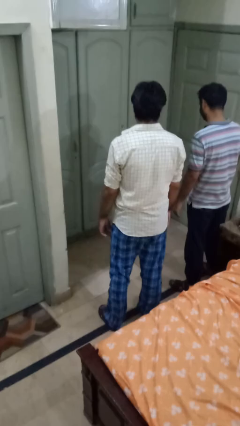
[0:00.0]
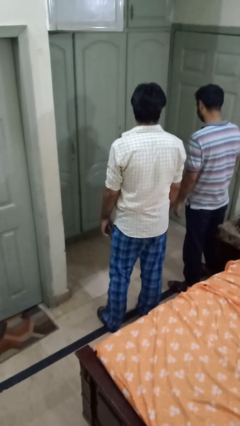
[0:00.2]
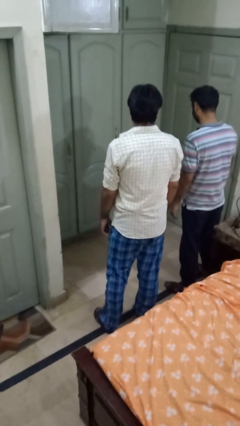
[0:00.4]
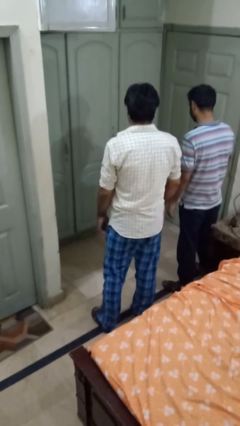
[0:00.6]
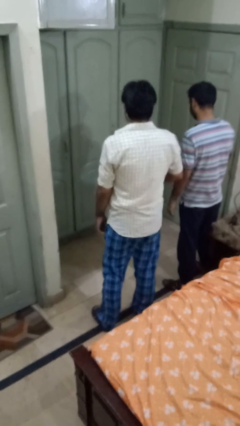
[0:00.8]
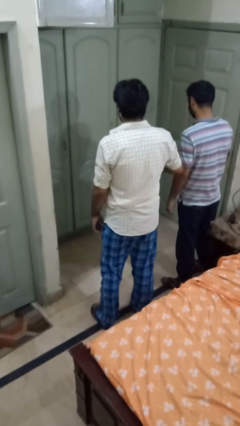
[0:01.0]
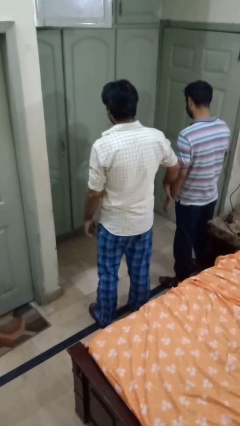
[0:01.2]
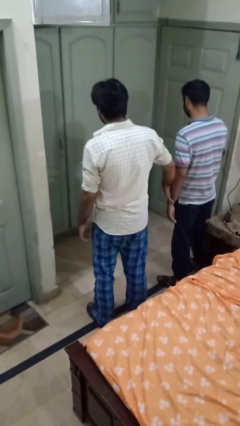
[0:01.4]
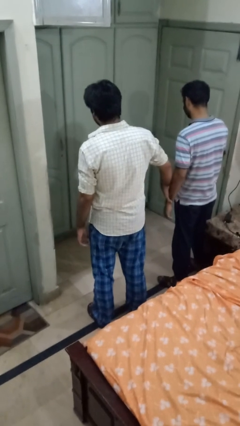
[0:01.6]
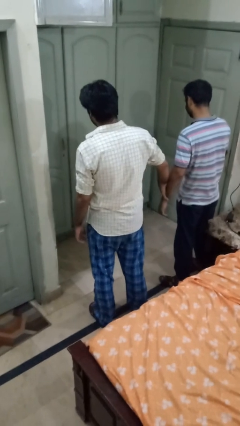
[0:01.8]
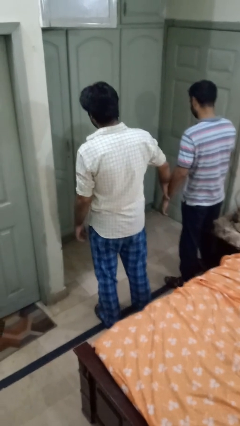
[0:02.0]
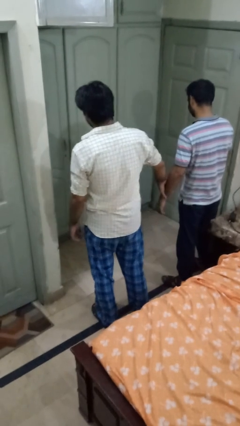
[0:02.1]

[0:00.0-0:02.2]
person grabs person by forearm

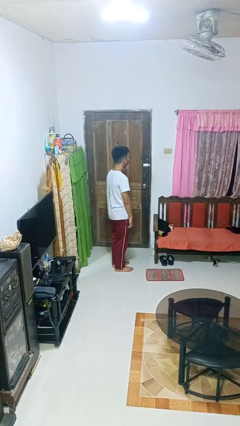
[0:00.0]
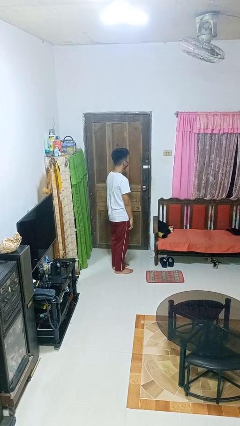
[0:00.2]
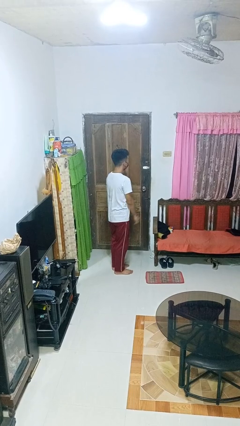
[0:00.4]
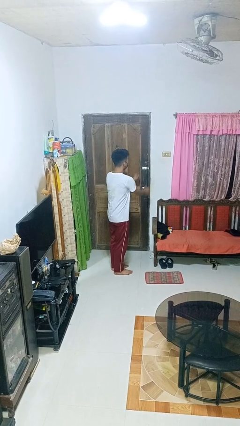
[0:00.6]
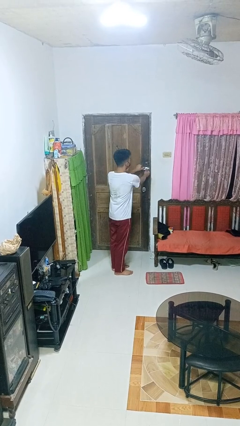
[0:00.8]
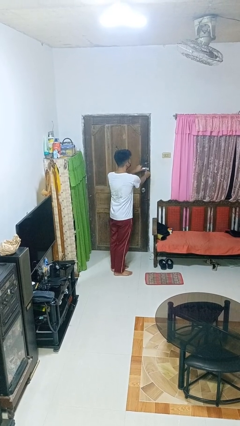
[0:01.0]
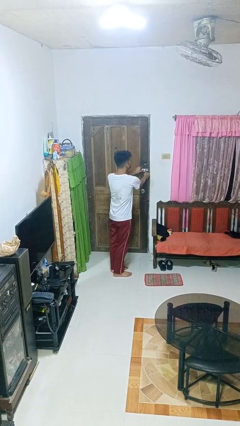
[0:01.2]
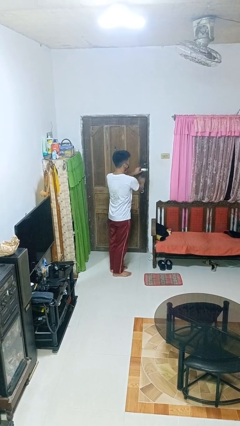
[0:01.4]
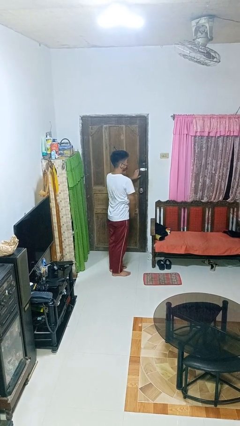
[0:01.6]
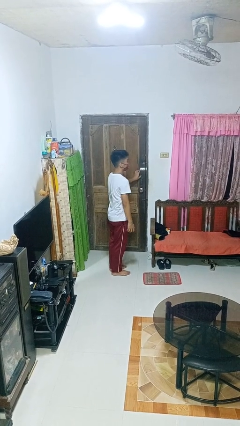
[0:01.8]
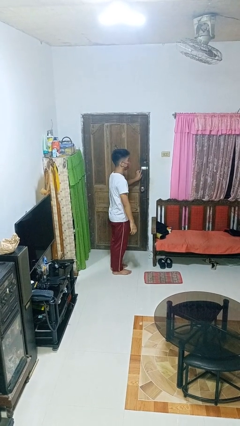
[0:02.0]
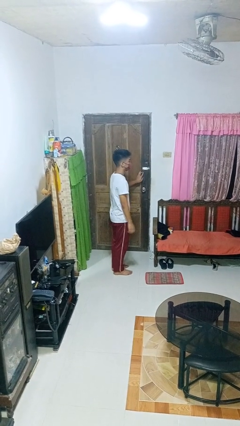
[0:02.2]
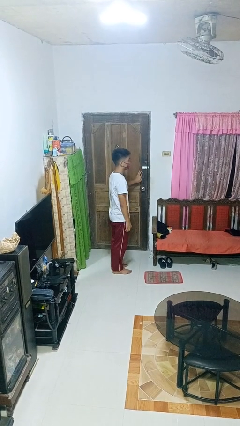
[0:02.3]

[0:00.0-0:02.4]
person unlocks door with keys

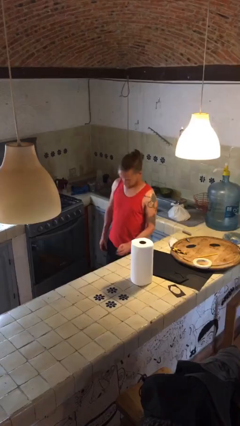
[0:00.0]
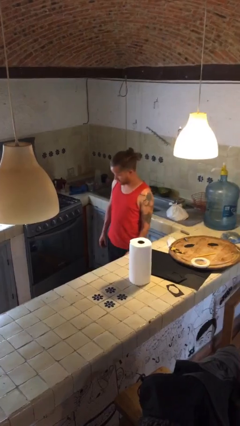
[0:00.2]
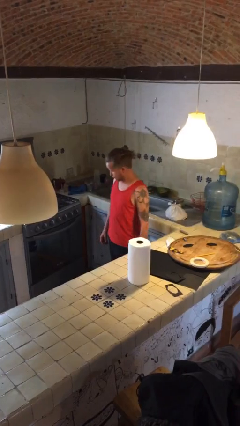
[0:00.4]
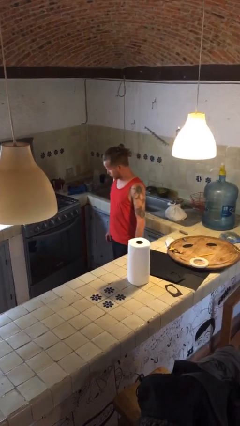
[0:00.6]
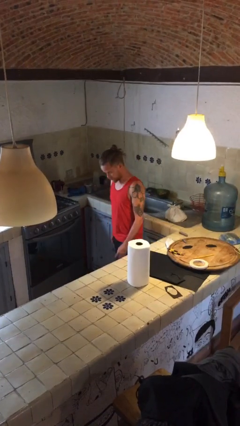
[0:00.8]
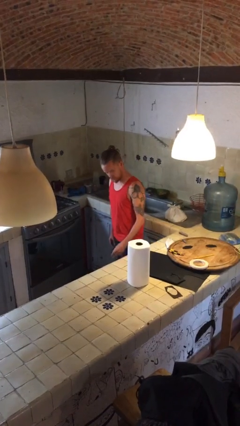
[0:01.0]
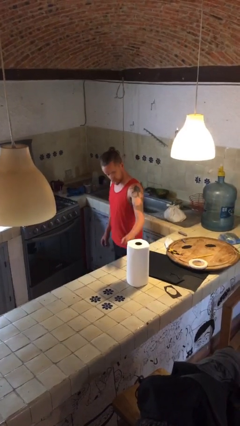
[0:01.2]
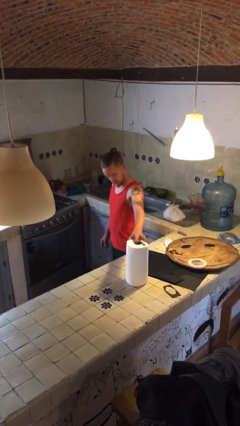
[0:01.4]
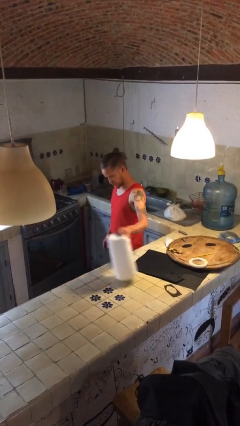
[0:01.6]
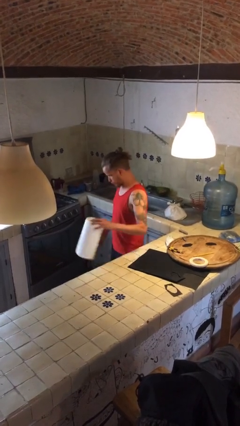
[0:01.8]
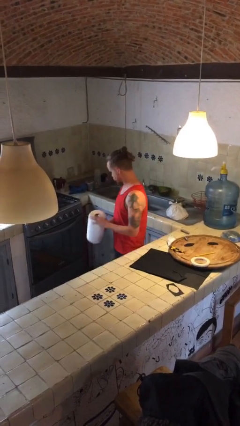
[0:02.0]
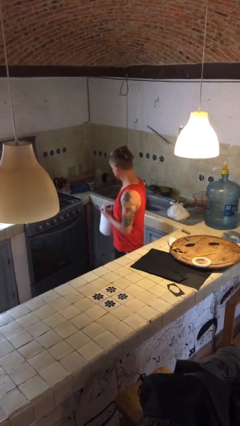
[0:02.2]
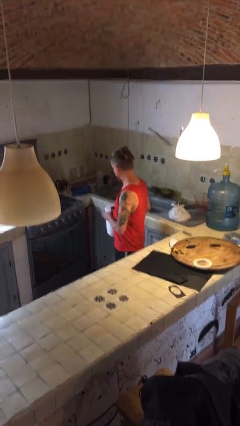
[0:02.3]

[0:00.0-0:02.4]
person picks up object from countertop

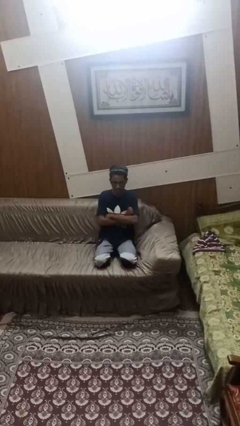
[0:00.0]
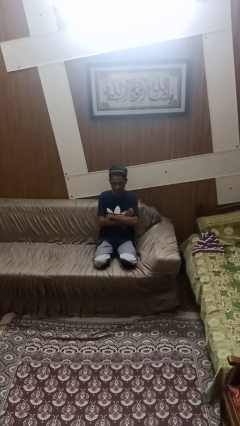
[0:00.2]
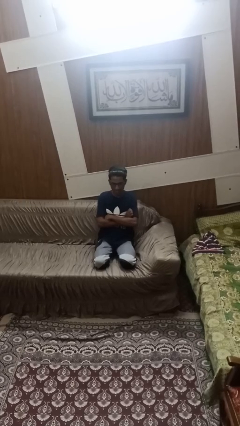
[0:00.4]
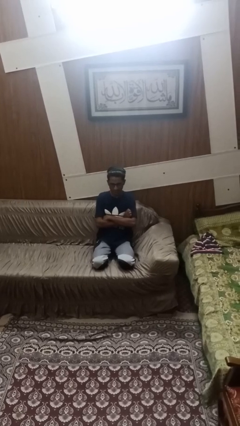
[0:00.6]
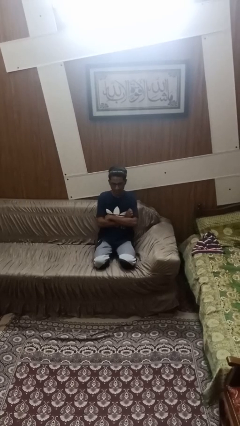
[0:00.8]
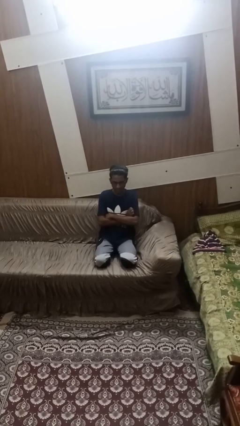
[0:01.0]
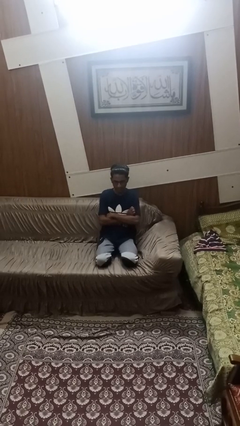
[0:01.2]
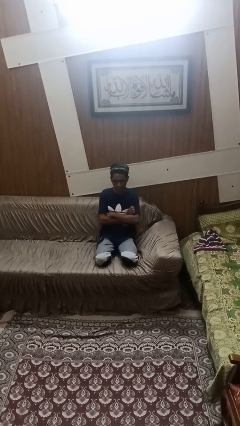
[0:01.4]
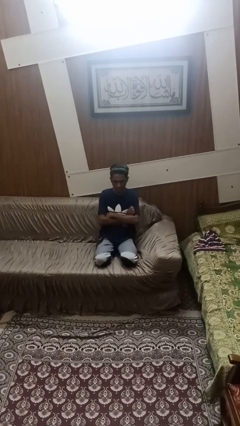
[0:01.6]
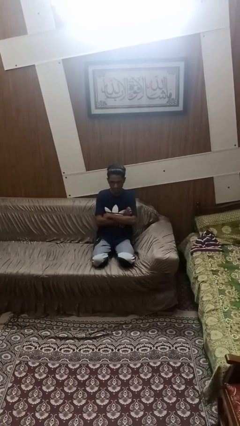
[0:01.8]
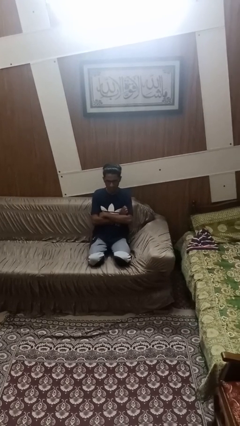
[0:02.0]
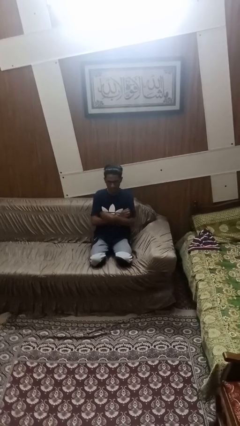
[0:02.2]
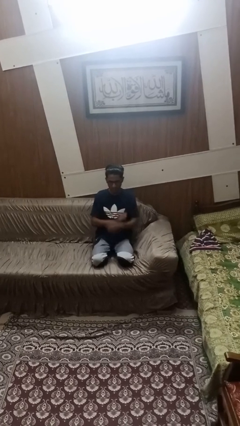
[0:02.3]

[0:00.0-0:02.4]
person crosses arms

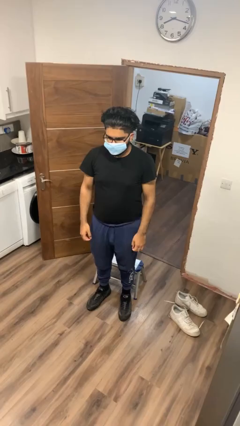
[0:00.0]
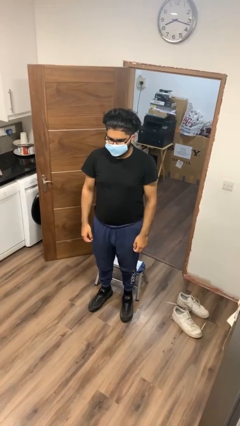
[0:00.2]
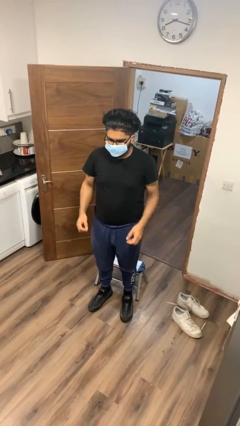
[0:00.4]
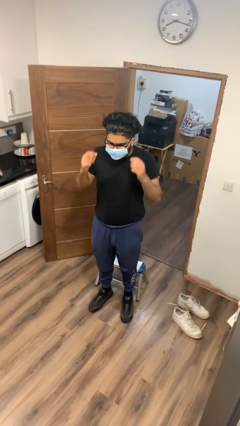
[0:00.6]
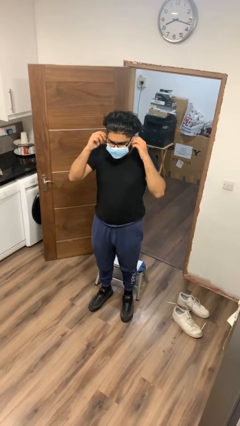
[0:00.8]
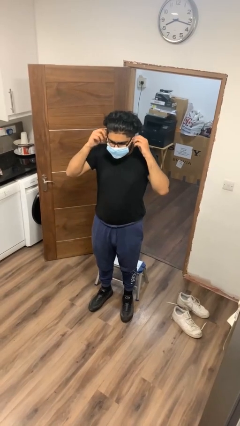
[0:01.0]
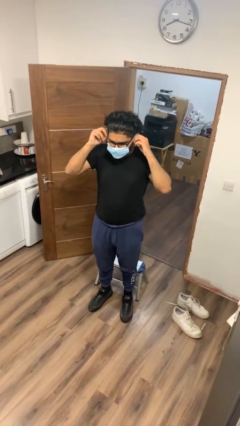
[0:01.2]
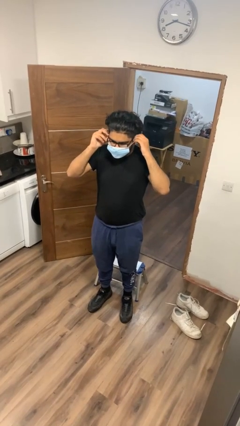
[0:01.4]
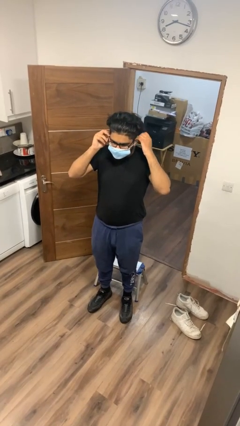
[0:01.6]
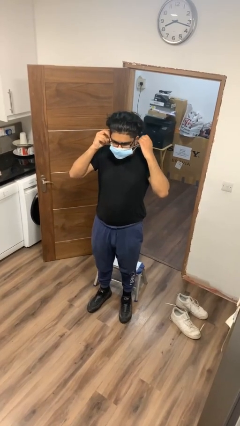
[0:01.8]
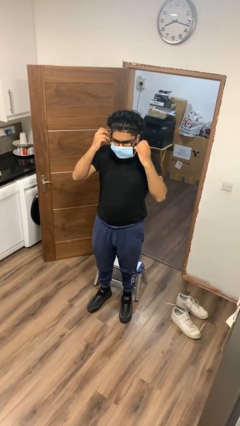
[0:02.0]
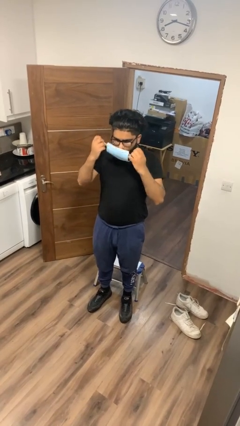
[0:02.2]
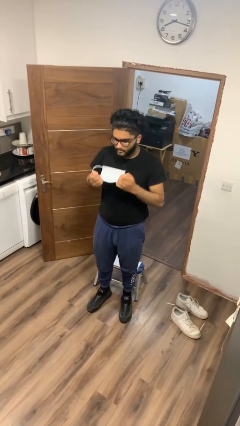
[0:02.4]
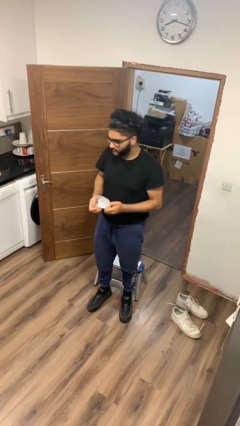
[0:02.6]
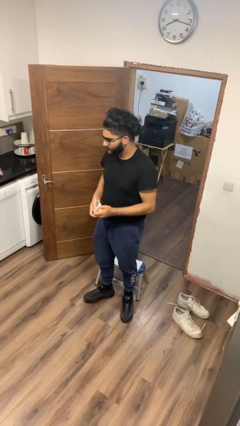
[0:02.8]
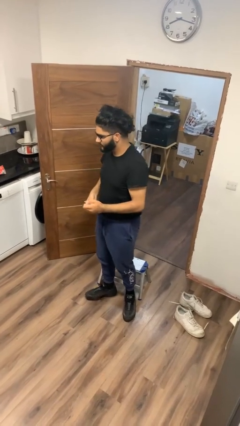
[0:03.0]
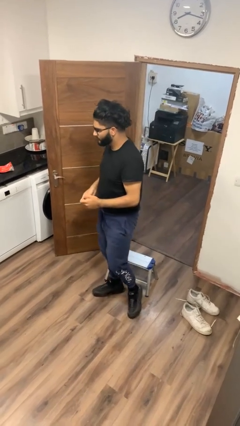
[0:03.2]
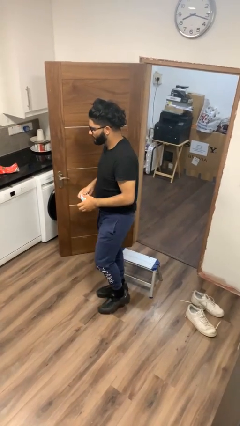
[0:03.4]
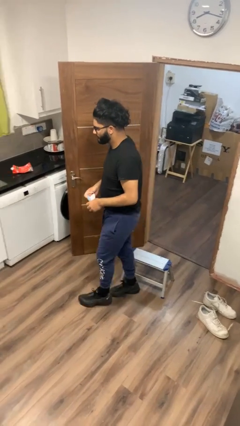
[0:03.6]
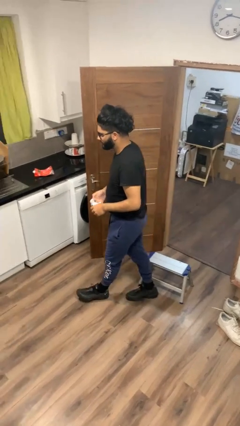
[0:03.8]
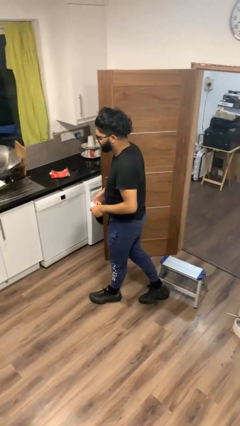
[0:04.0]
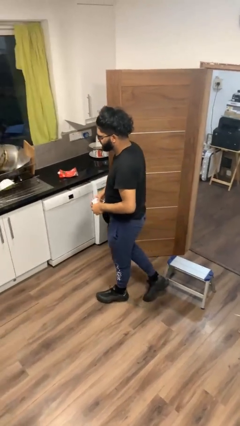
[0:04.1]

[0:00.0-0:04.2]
person takes off facemask

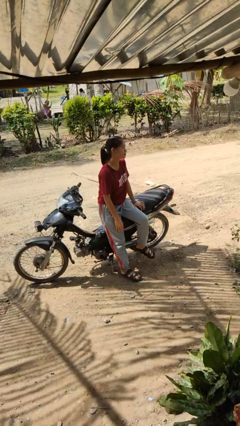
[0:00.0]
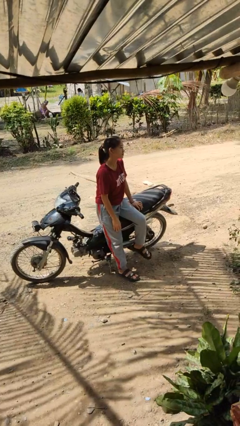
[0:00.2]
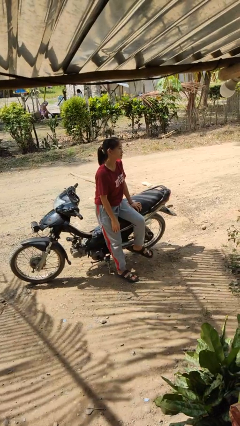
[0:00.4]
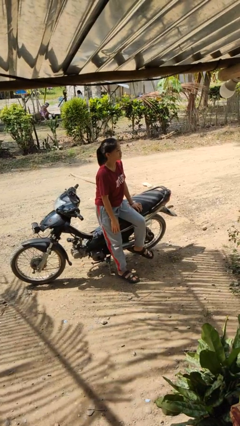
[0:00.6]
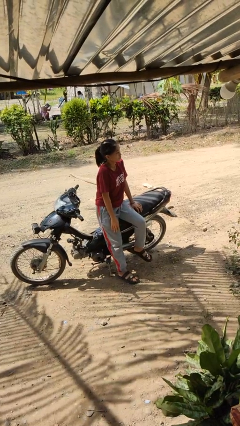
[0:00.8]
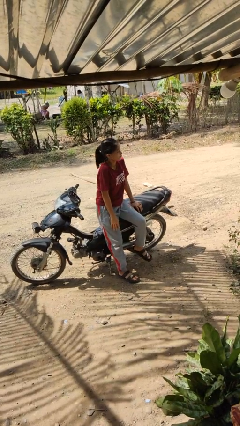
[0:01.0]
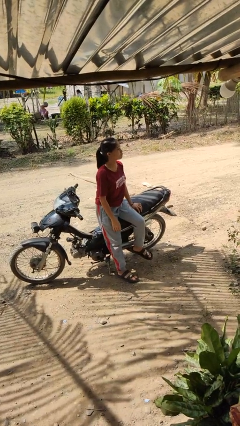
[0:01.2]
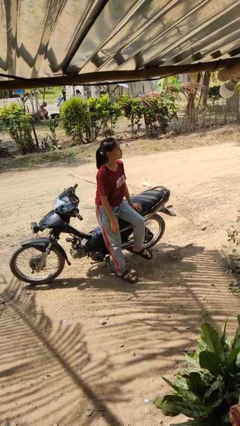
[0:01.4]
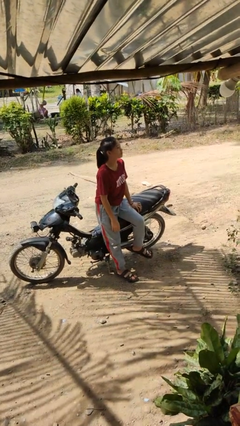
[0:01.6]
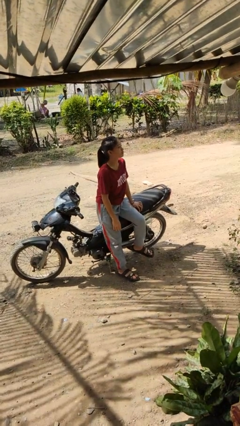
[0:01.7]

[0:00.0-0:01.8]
person shrugs

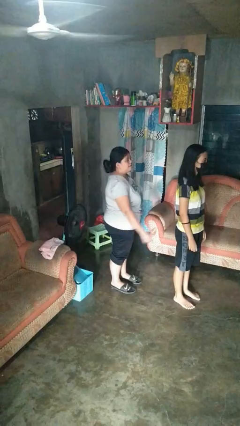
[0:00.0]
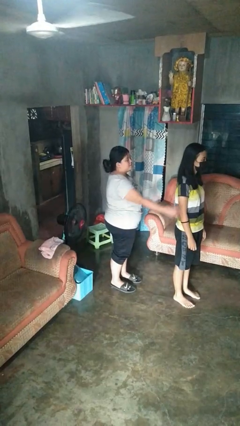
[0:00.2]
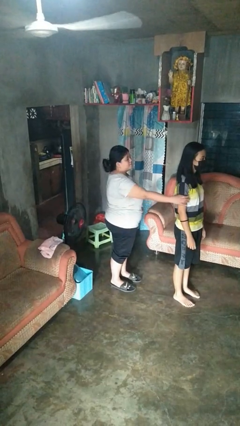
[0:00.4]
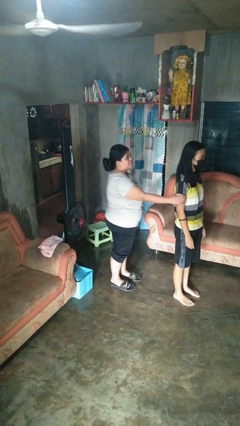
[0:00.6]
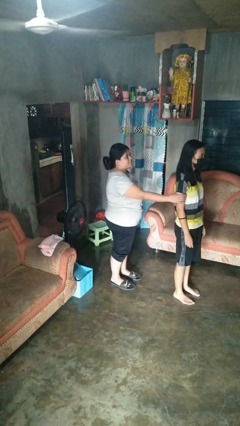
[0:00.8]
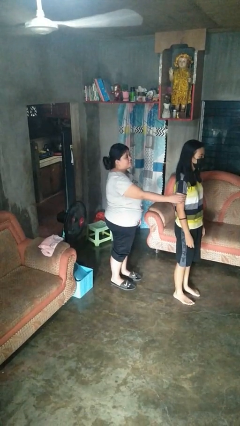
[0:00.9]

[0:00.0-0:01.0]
person grabs person by shoulder

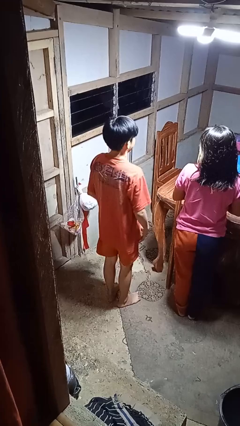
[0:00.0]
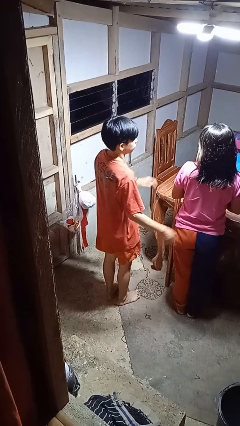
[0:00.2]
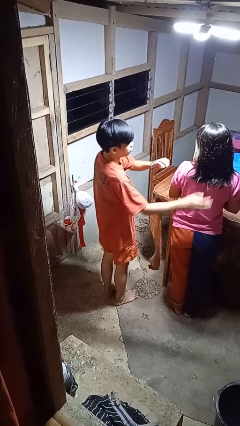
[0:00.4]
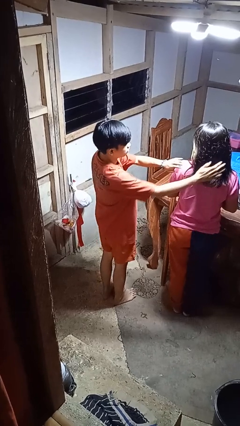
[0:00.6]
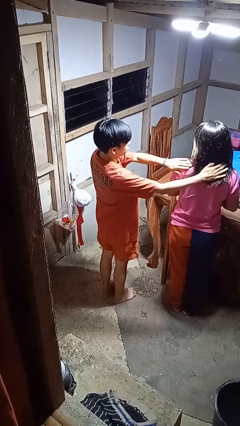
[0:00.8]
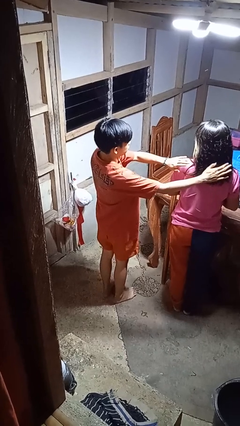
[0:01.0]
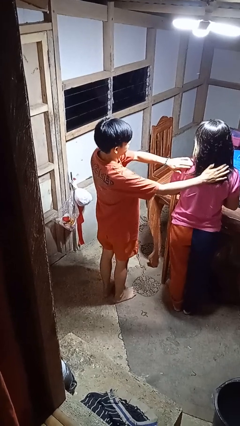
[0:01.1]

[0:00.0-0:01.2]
person pounds shoulders of person
